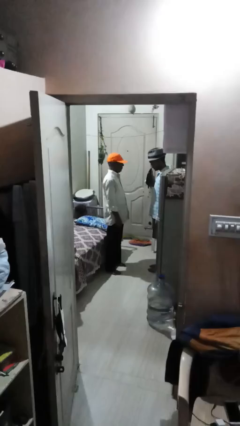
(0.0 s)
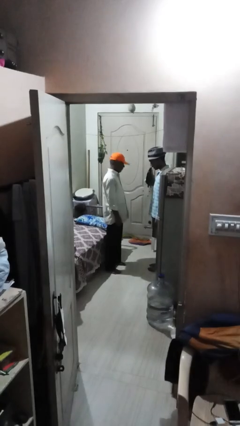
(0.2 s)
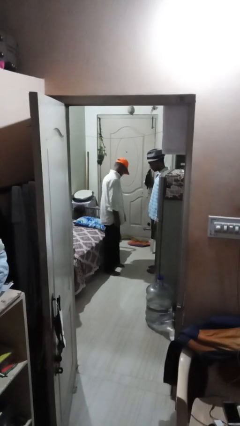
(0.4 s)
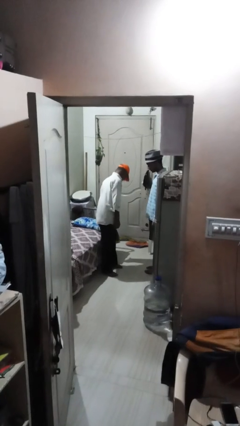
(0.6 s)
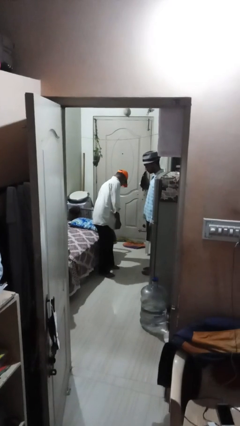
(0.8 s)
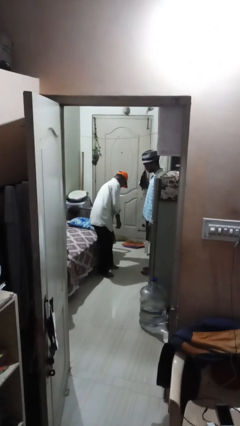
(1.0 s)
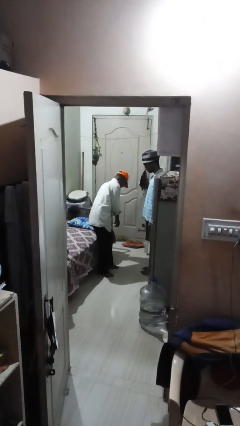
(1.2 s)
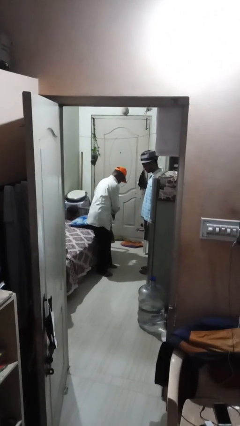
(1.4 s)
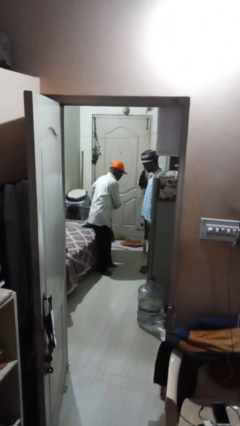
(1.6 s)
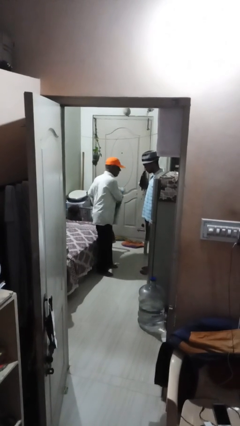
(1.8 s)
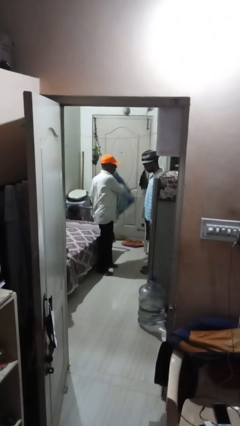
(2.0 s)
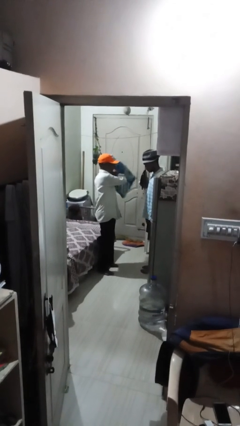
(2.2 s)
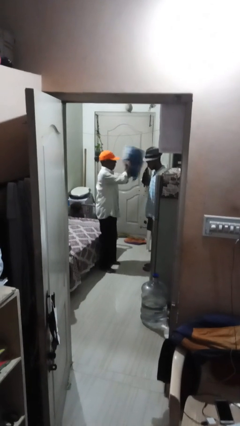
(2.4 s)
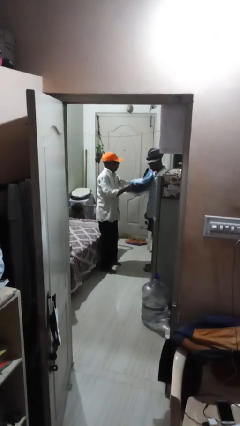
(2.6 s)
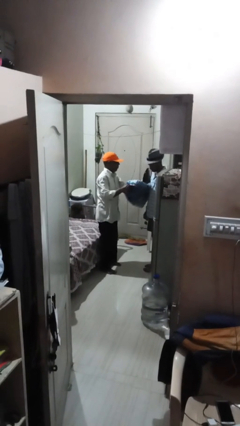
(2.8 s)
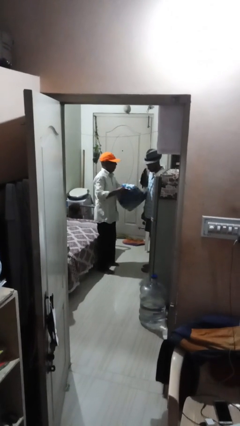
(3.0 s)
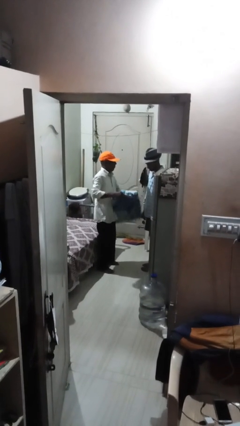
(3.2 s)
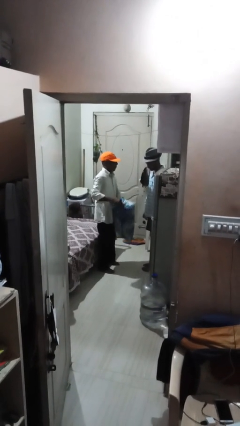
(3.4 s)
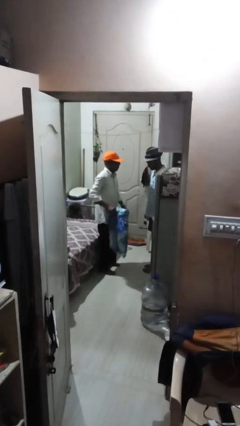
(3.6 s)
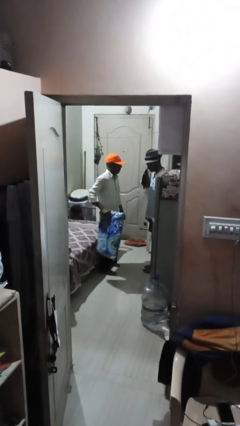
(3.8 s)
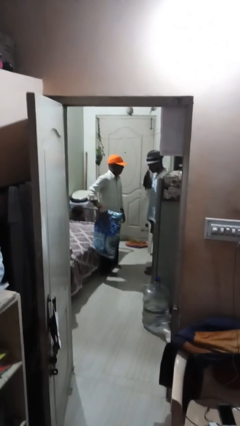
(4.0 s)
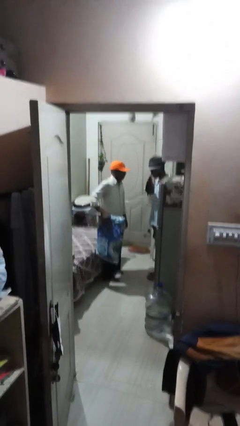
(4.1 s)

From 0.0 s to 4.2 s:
person hits person with pillow

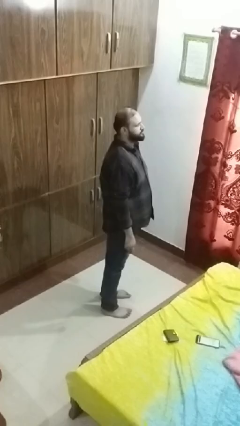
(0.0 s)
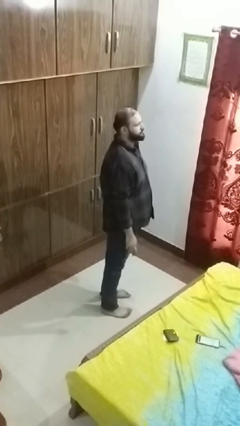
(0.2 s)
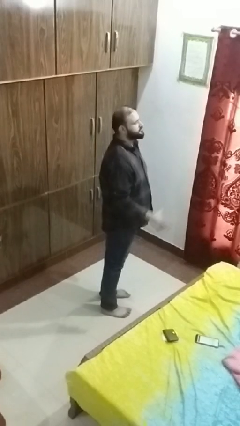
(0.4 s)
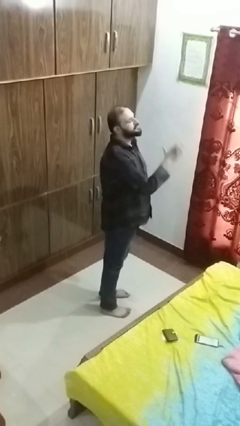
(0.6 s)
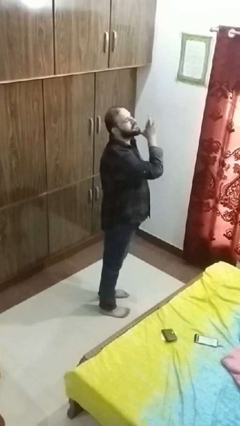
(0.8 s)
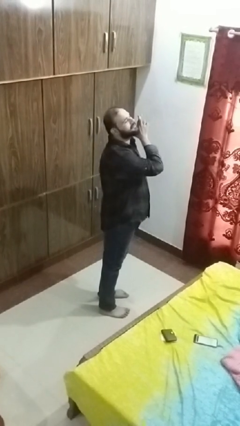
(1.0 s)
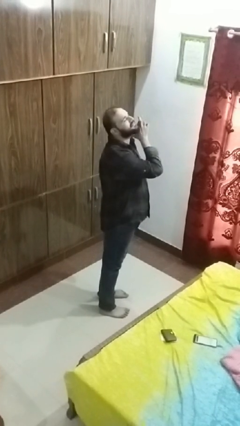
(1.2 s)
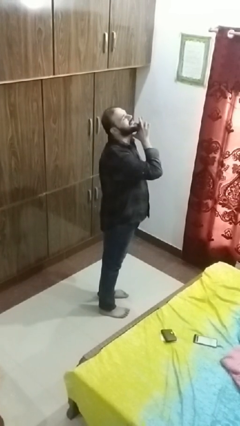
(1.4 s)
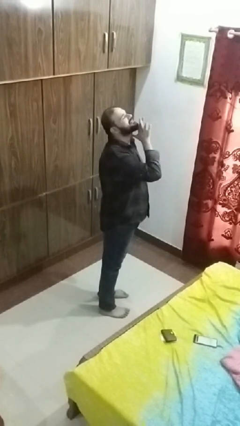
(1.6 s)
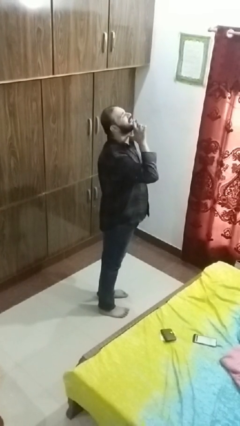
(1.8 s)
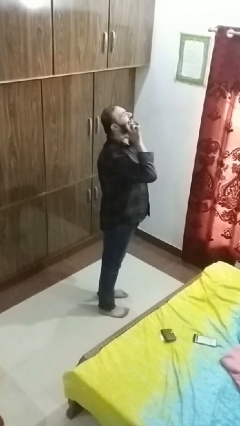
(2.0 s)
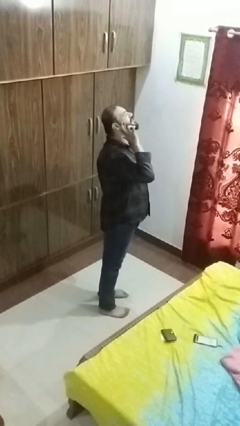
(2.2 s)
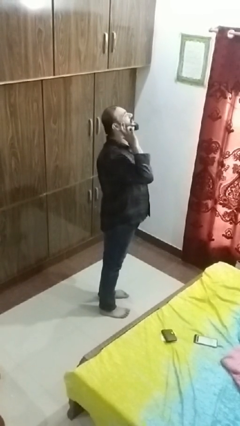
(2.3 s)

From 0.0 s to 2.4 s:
person gestures cut

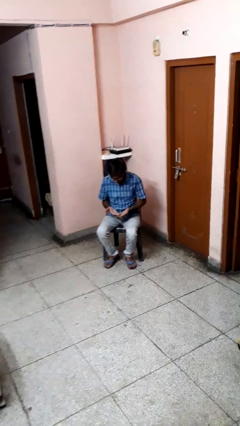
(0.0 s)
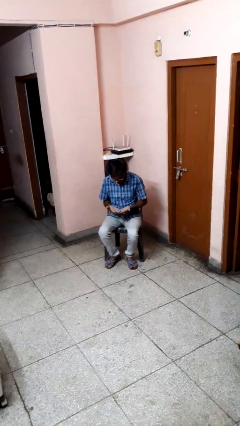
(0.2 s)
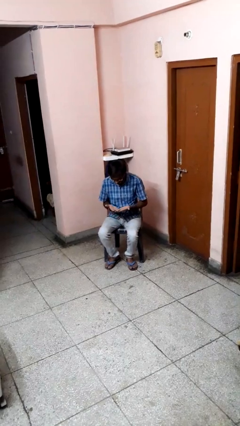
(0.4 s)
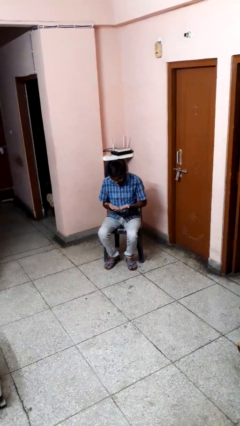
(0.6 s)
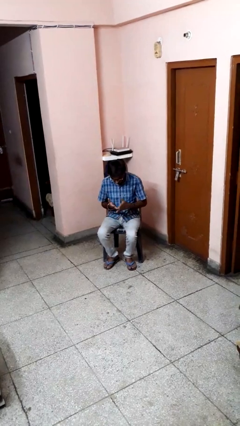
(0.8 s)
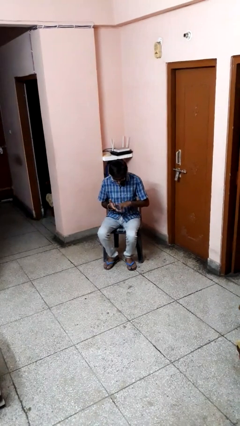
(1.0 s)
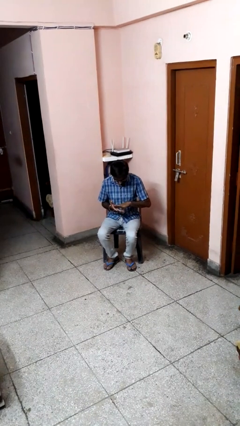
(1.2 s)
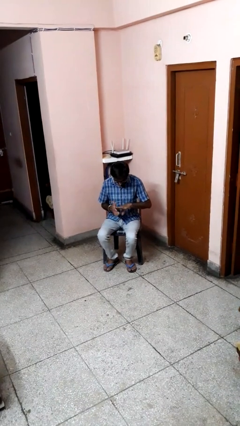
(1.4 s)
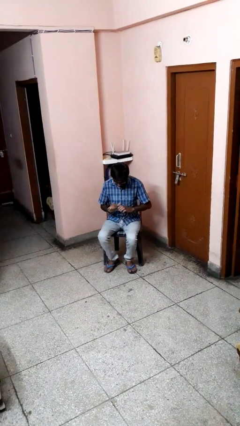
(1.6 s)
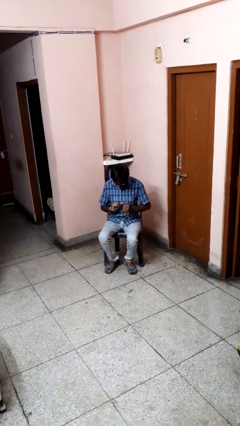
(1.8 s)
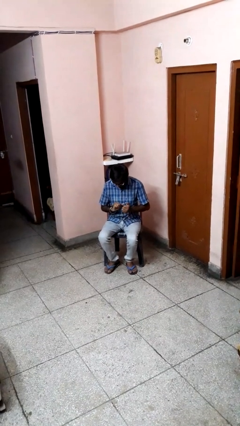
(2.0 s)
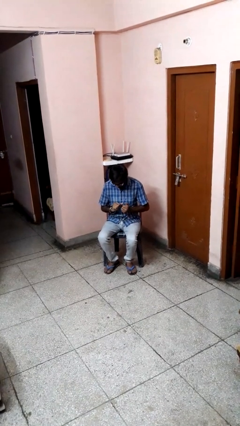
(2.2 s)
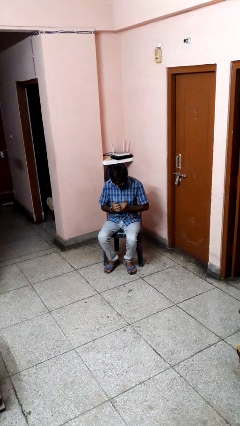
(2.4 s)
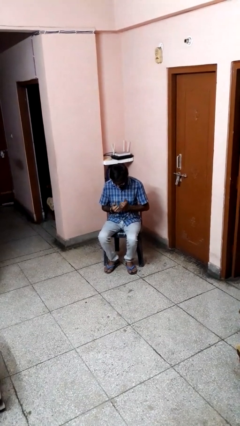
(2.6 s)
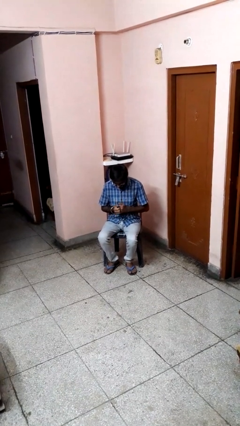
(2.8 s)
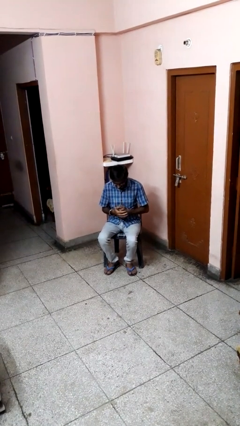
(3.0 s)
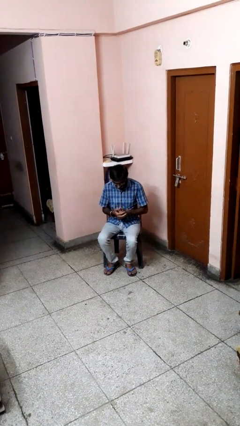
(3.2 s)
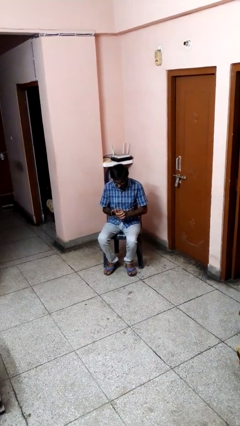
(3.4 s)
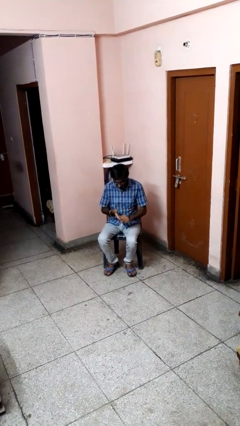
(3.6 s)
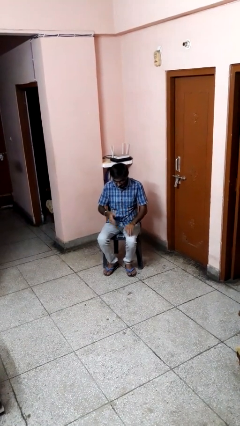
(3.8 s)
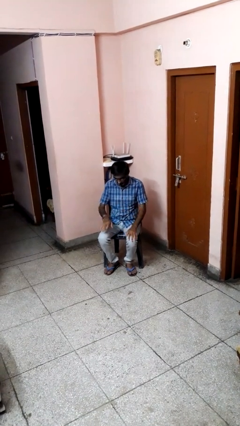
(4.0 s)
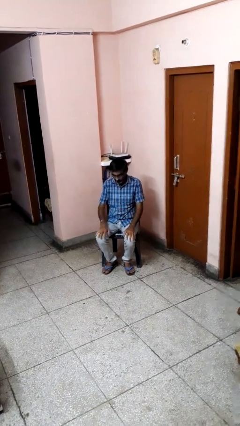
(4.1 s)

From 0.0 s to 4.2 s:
person looks at hands in lap

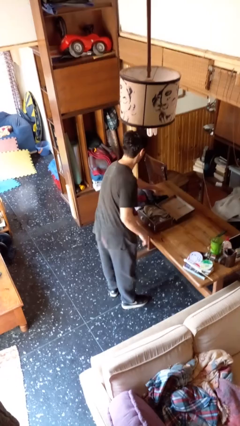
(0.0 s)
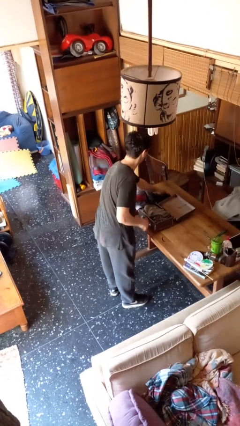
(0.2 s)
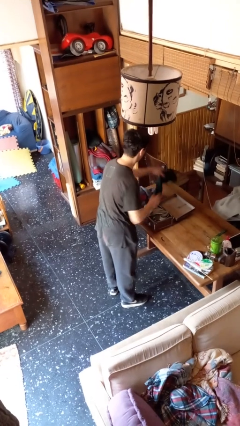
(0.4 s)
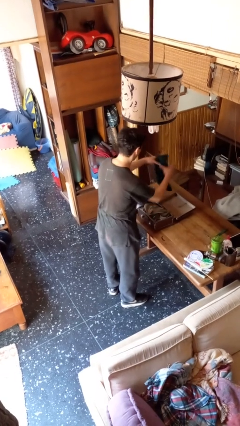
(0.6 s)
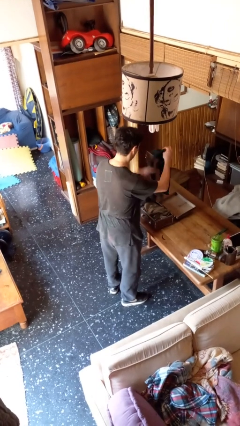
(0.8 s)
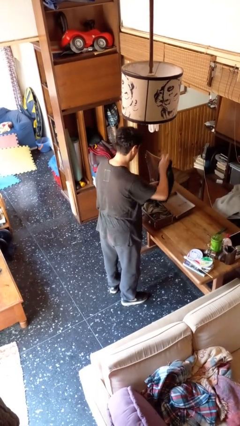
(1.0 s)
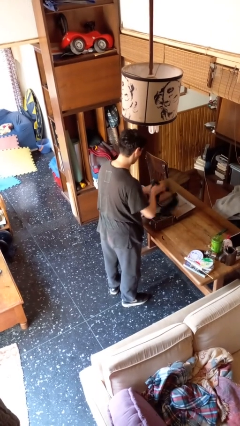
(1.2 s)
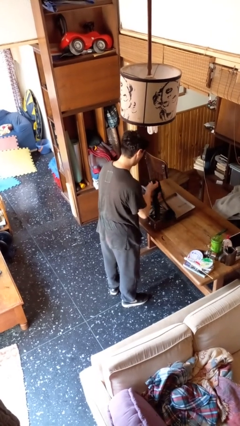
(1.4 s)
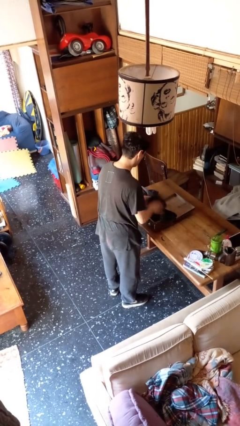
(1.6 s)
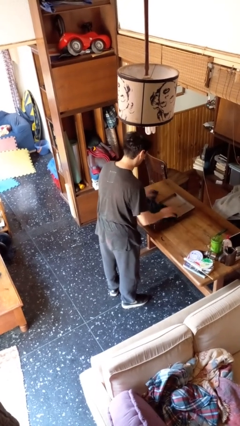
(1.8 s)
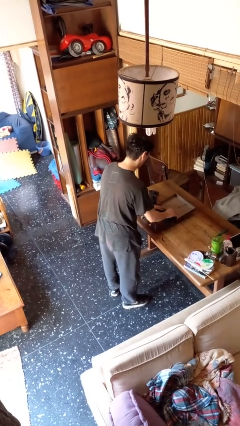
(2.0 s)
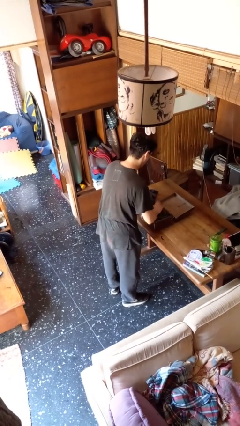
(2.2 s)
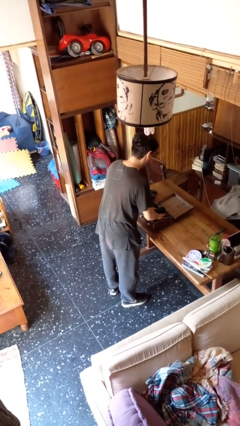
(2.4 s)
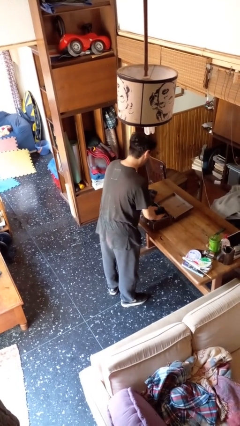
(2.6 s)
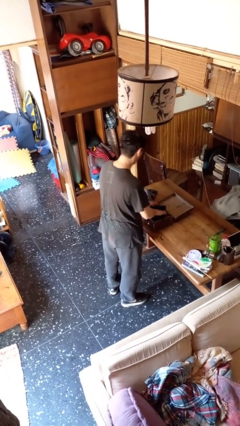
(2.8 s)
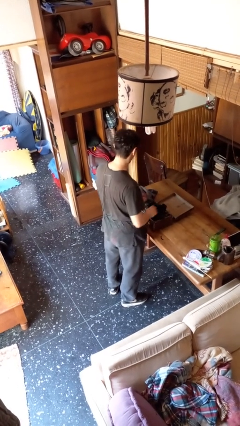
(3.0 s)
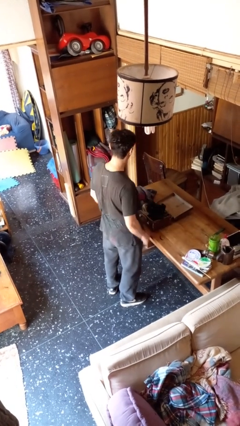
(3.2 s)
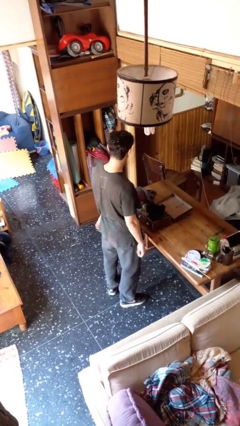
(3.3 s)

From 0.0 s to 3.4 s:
person loads clothes into suitcase

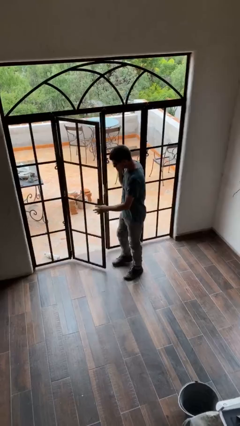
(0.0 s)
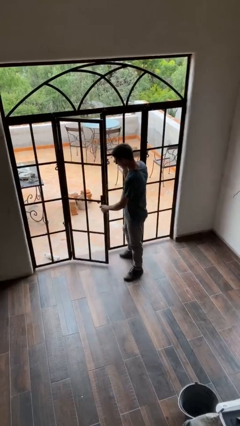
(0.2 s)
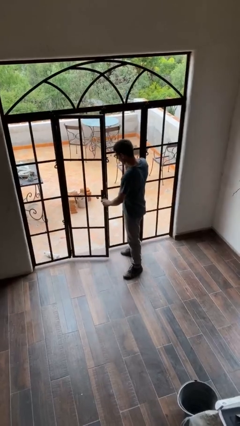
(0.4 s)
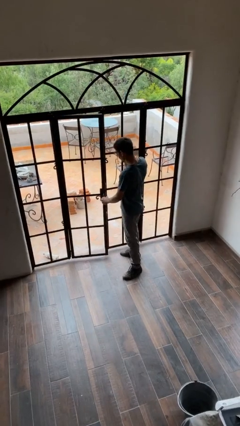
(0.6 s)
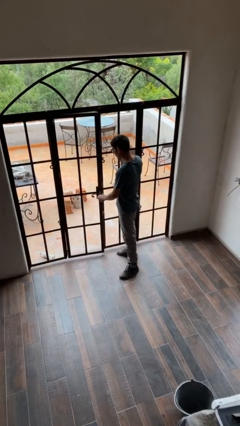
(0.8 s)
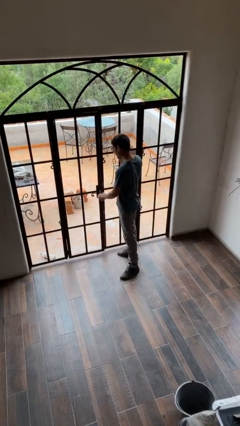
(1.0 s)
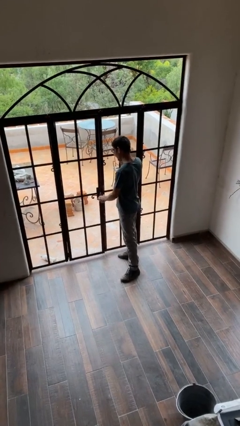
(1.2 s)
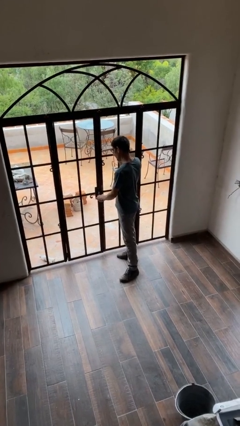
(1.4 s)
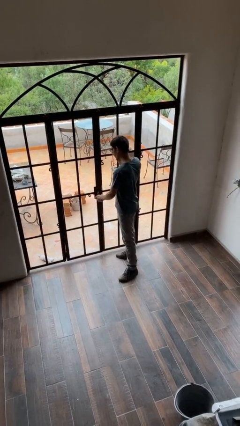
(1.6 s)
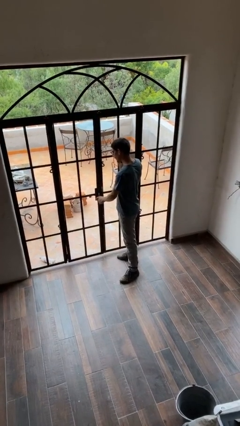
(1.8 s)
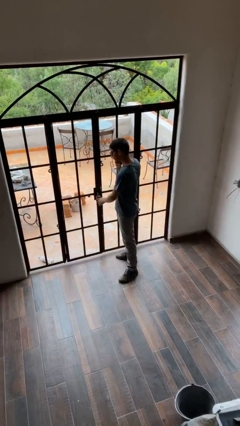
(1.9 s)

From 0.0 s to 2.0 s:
person closes facility door

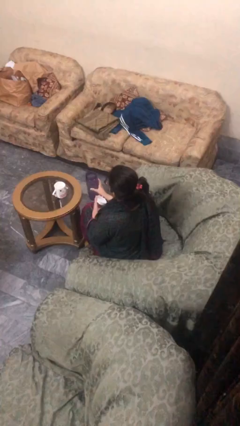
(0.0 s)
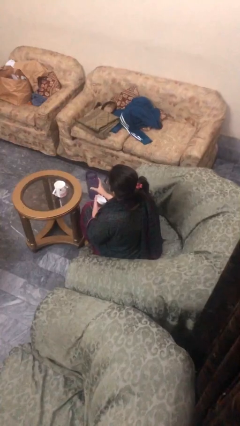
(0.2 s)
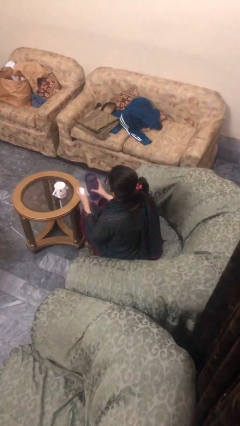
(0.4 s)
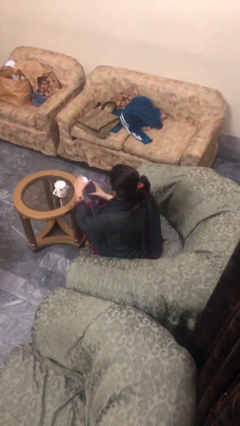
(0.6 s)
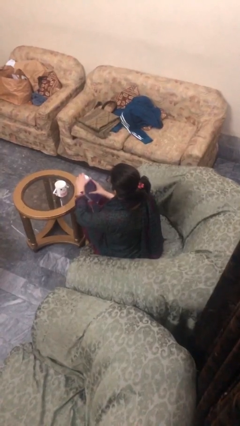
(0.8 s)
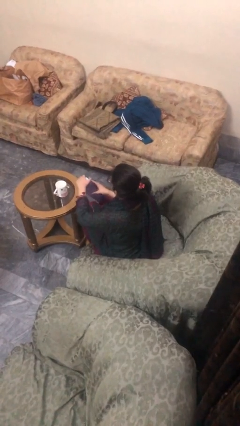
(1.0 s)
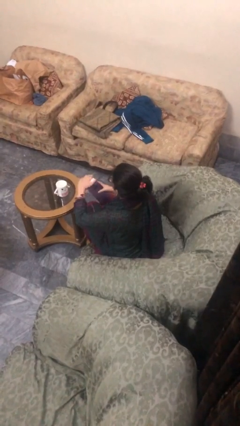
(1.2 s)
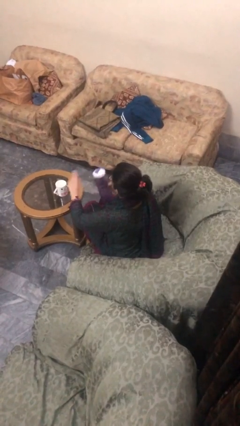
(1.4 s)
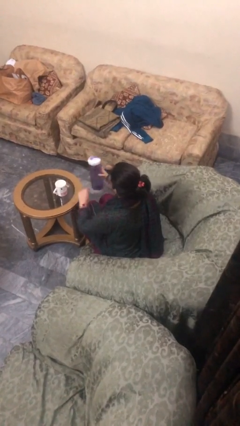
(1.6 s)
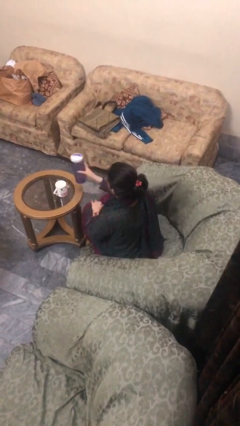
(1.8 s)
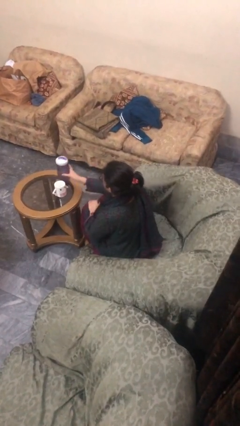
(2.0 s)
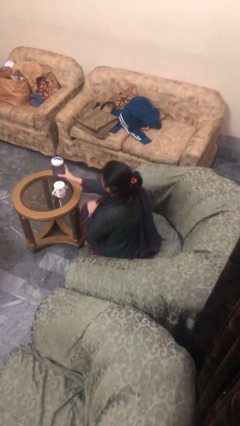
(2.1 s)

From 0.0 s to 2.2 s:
person screws lid to bottle
